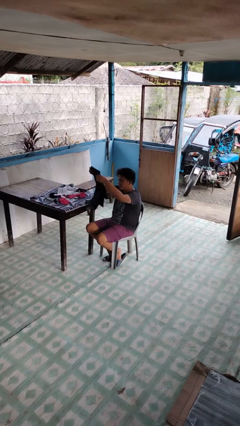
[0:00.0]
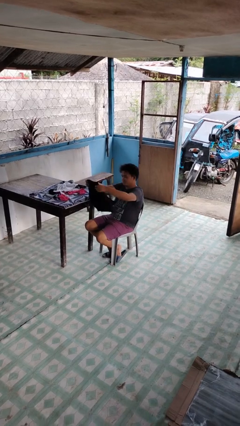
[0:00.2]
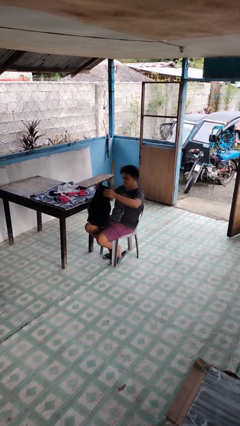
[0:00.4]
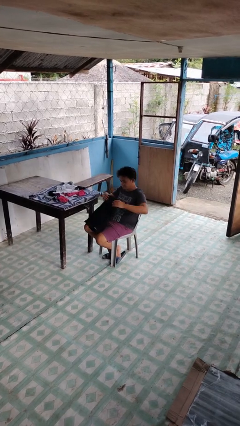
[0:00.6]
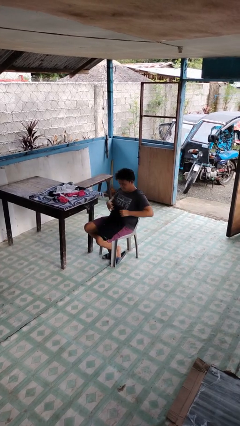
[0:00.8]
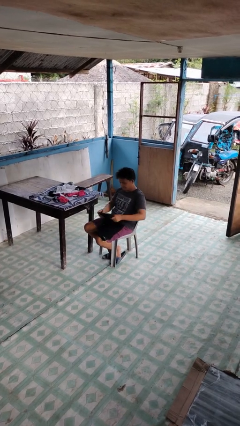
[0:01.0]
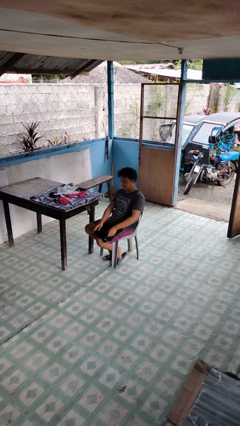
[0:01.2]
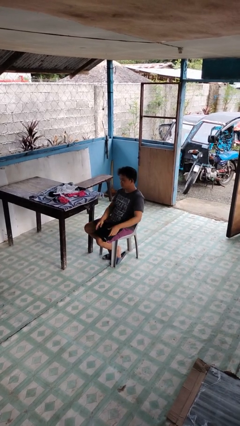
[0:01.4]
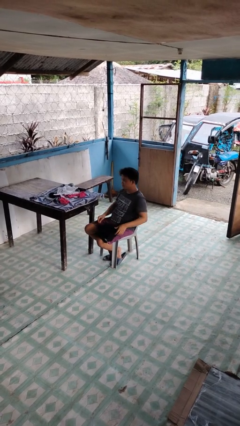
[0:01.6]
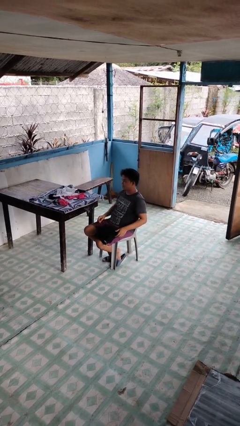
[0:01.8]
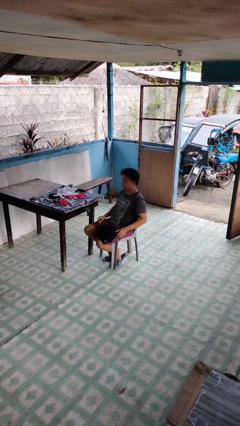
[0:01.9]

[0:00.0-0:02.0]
person folds pants

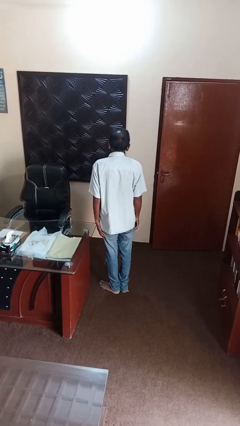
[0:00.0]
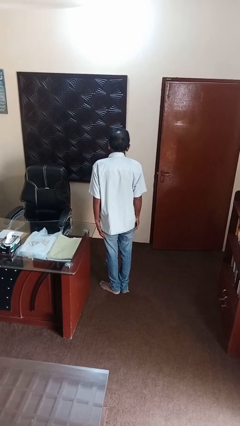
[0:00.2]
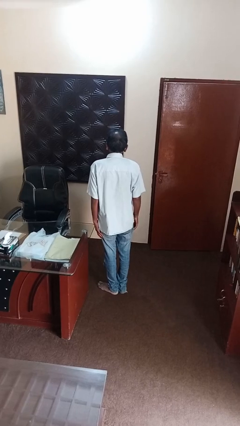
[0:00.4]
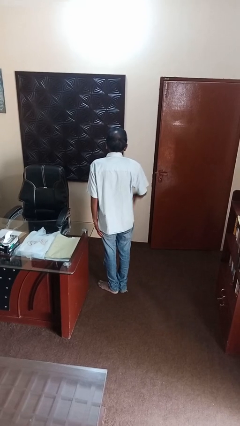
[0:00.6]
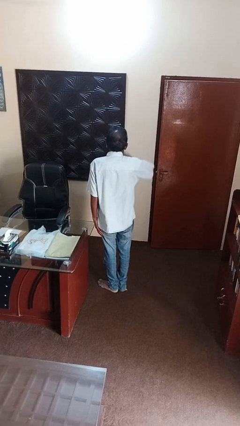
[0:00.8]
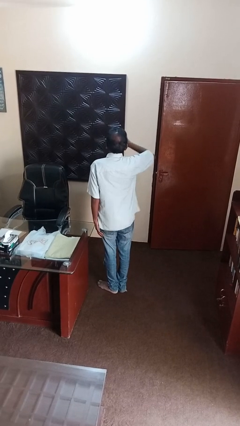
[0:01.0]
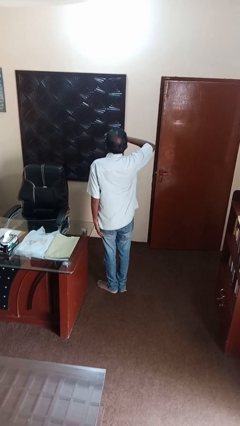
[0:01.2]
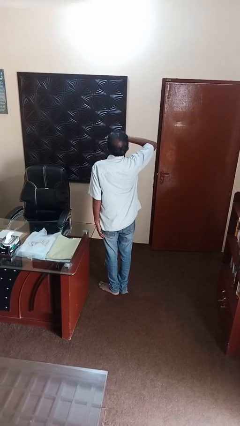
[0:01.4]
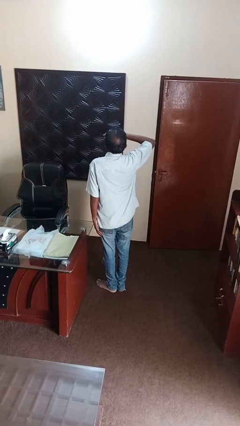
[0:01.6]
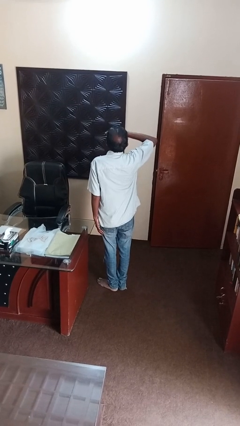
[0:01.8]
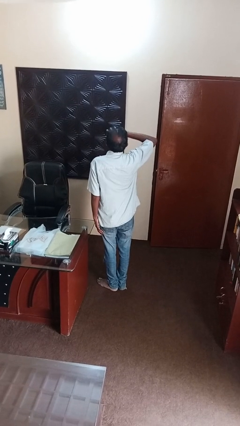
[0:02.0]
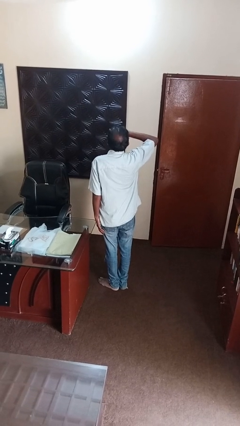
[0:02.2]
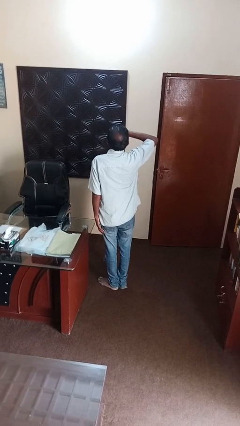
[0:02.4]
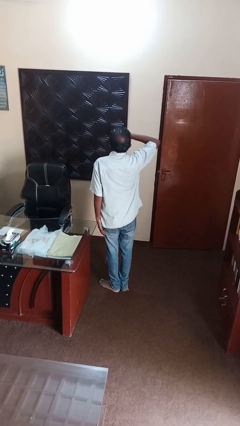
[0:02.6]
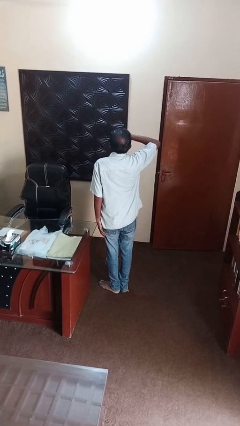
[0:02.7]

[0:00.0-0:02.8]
person yawns

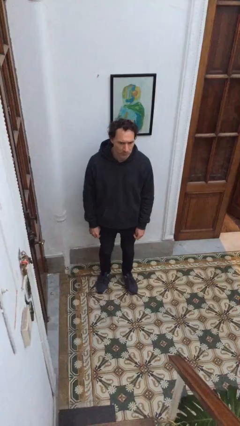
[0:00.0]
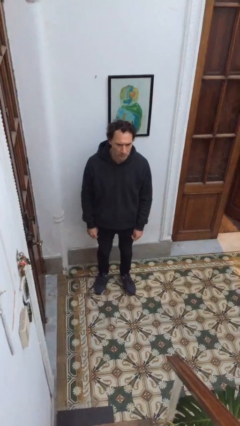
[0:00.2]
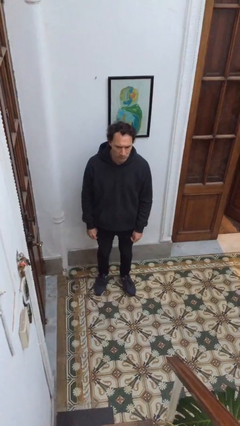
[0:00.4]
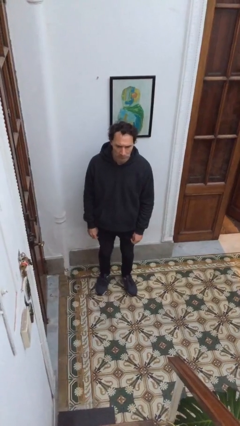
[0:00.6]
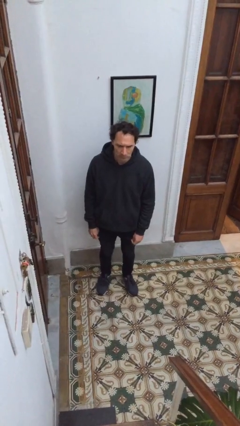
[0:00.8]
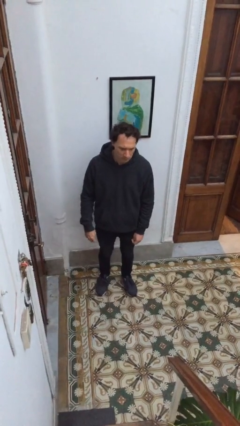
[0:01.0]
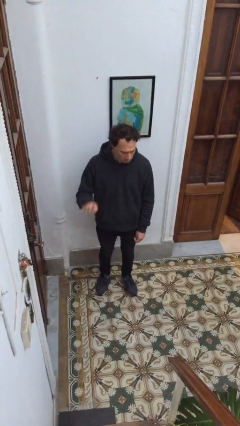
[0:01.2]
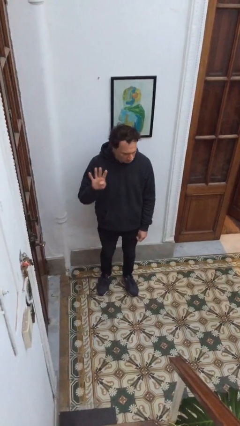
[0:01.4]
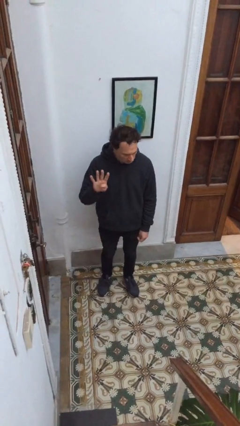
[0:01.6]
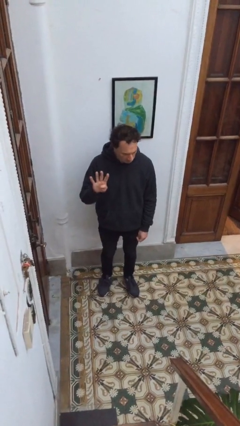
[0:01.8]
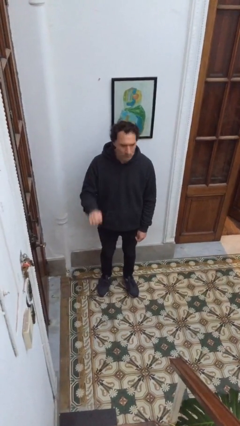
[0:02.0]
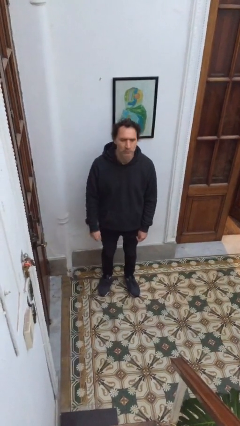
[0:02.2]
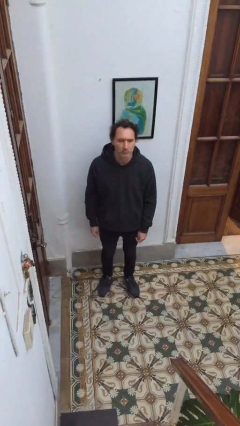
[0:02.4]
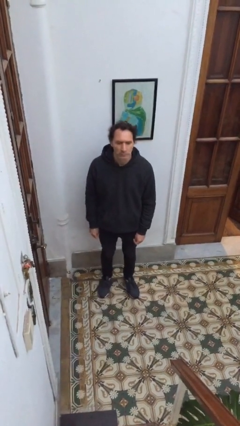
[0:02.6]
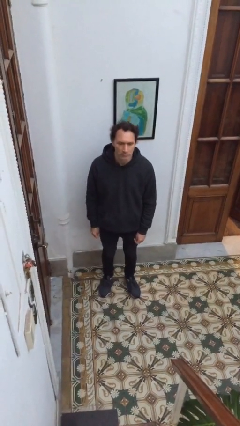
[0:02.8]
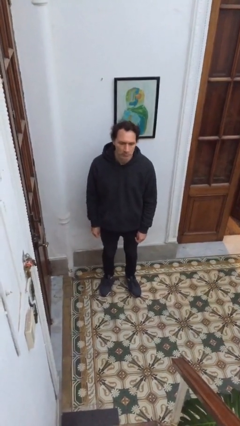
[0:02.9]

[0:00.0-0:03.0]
person gestures number four

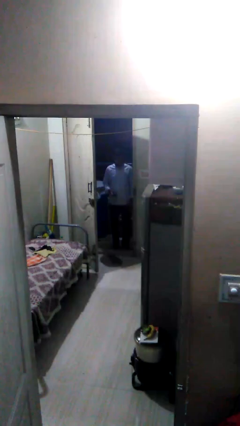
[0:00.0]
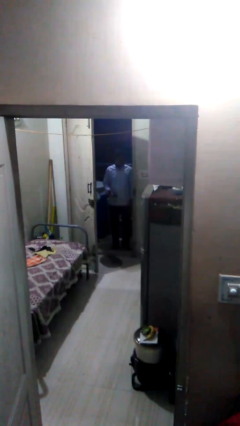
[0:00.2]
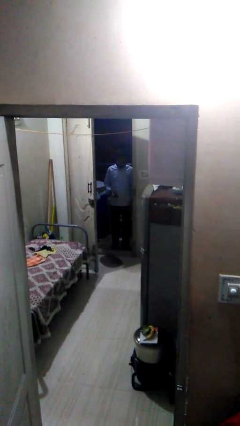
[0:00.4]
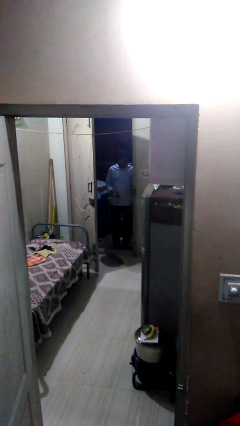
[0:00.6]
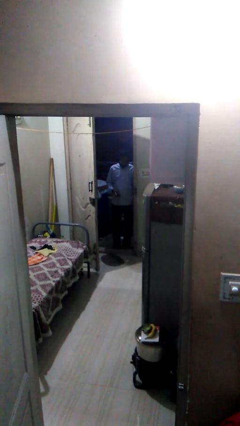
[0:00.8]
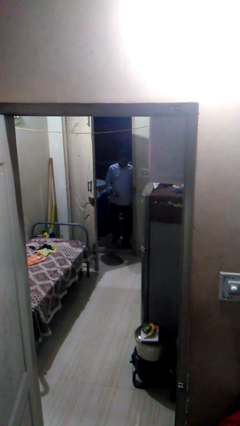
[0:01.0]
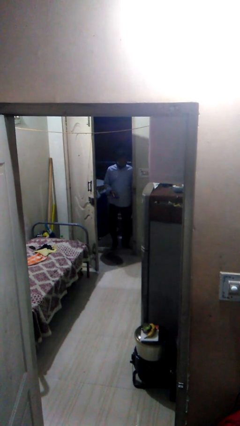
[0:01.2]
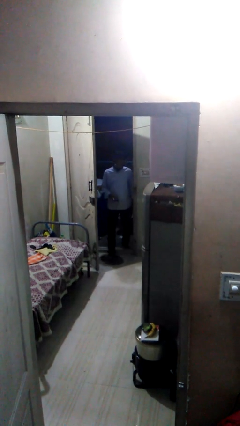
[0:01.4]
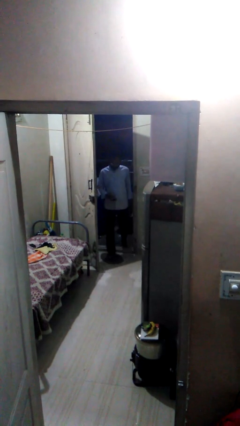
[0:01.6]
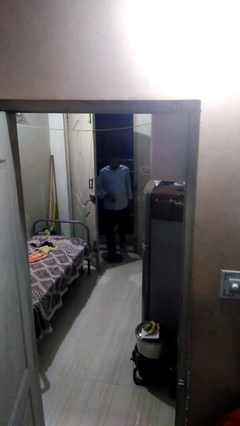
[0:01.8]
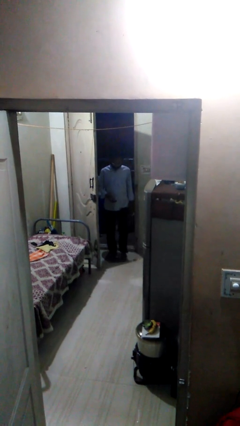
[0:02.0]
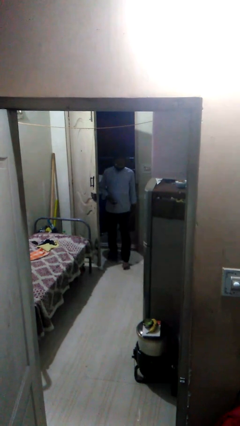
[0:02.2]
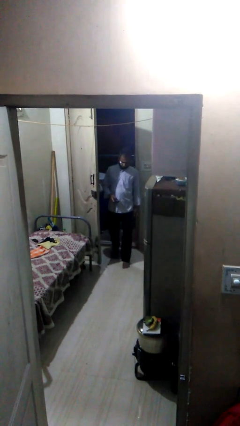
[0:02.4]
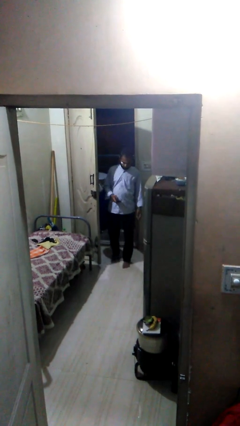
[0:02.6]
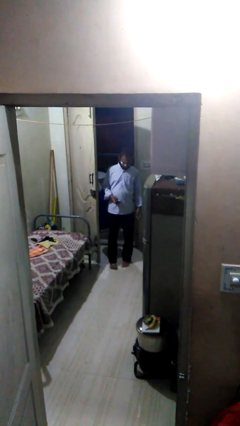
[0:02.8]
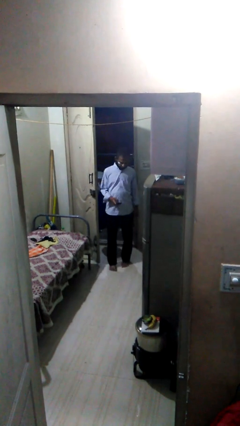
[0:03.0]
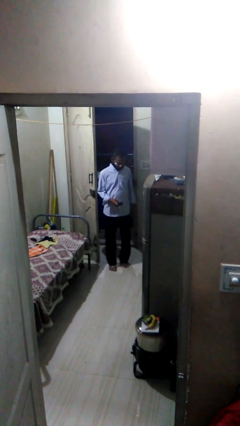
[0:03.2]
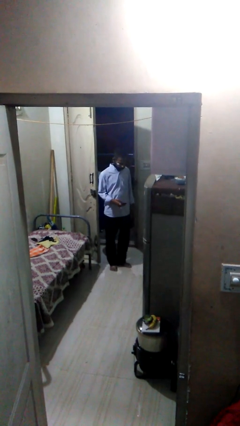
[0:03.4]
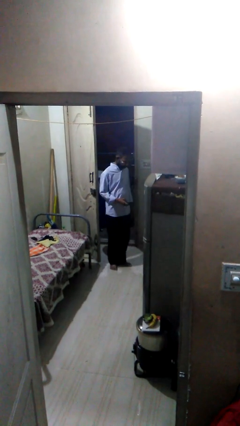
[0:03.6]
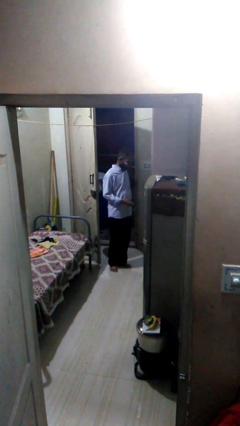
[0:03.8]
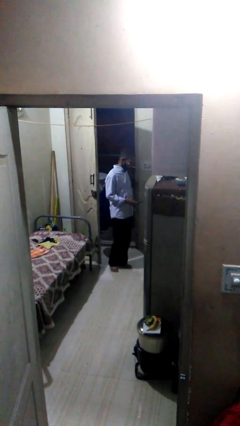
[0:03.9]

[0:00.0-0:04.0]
person enters scene through structure

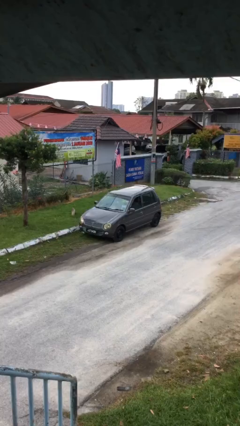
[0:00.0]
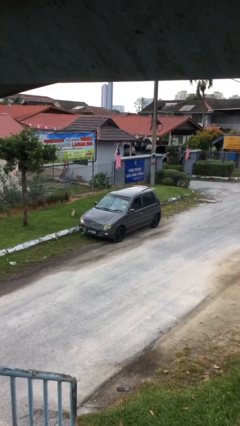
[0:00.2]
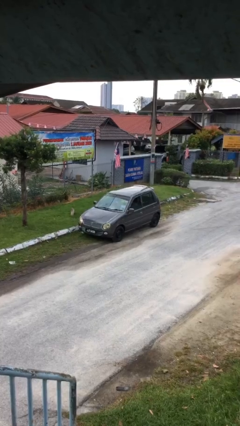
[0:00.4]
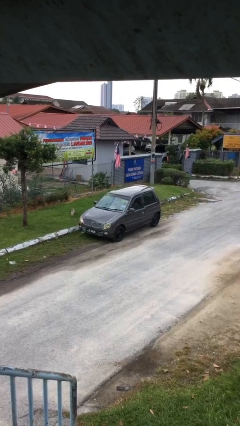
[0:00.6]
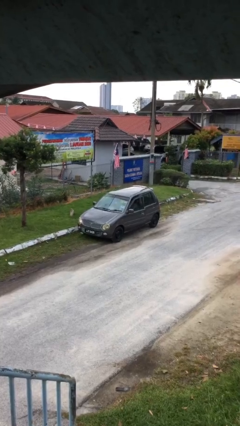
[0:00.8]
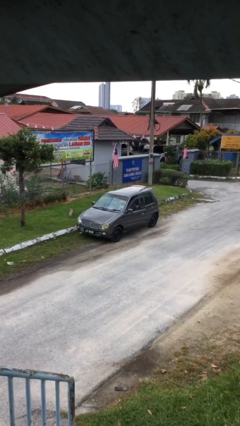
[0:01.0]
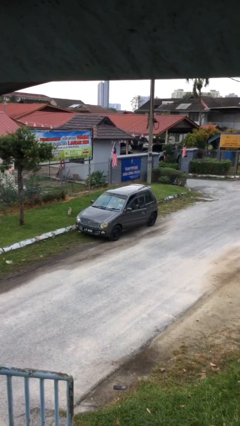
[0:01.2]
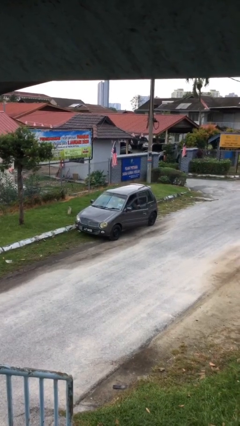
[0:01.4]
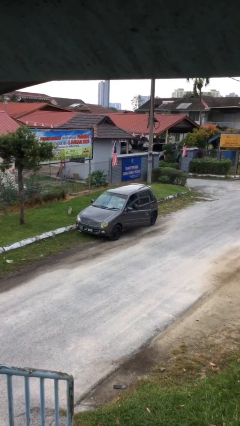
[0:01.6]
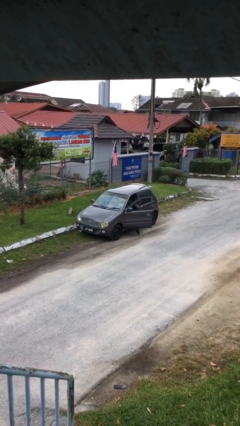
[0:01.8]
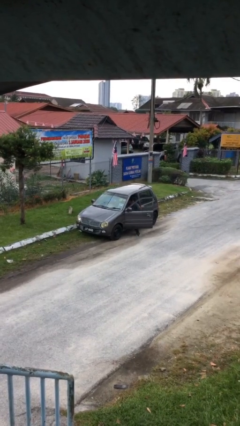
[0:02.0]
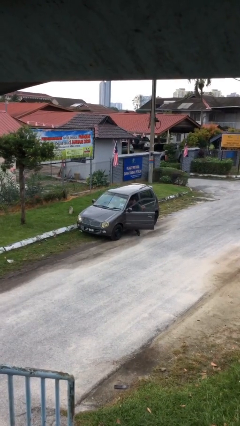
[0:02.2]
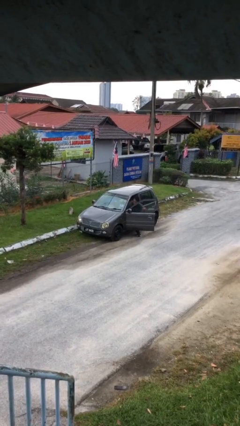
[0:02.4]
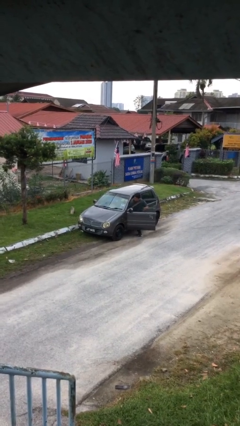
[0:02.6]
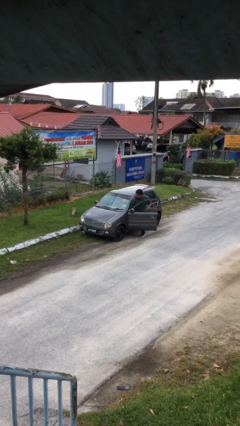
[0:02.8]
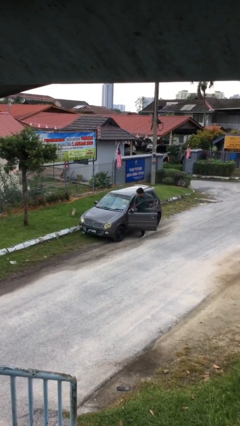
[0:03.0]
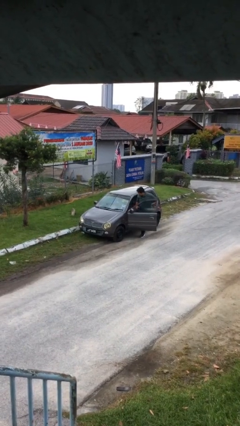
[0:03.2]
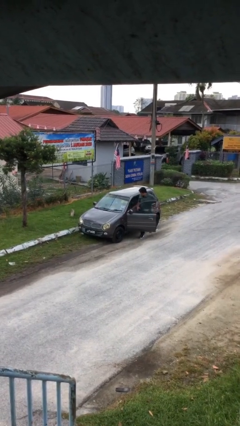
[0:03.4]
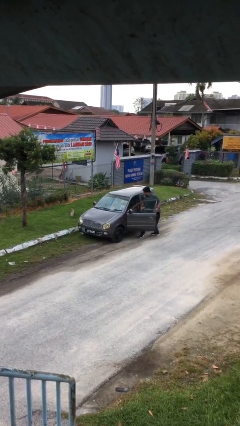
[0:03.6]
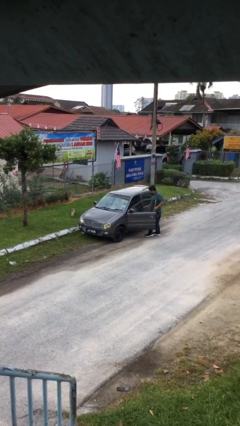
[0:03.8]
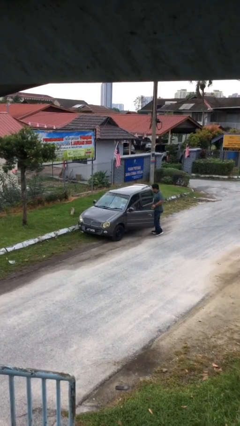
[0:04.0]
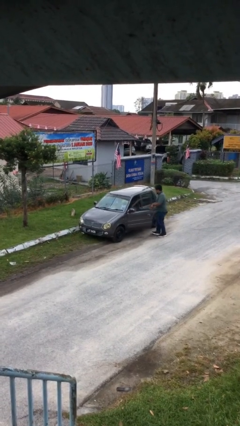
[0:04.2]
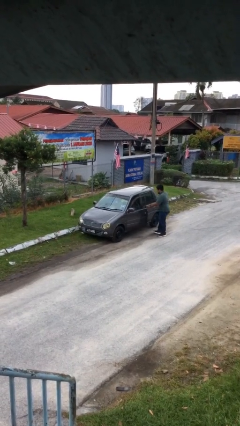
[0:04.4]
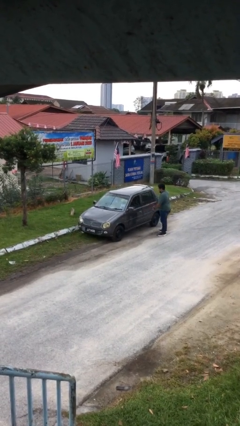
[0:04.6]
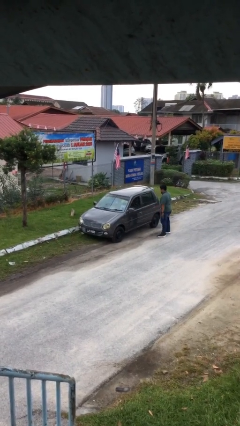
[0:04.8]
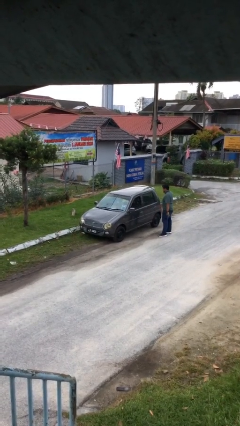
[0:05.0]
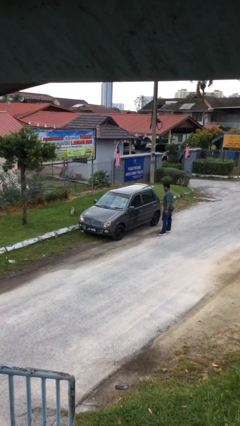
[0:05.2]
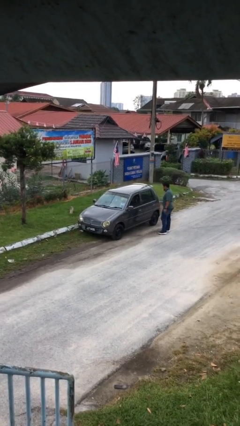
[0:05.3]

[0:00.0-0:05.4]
car drops off person
